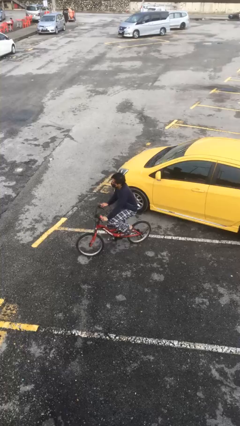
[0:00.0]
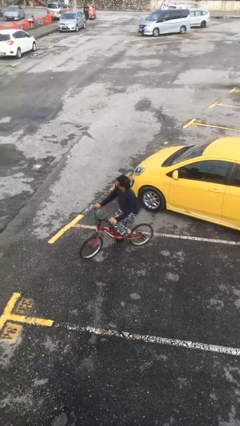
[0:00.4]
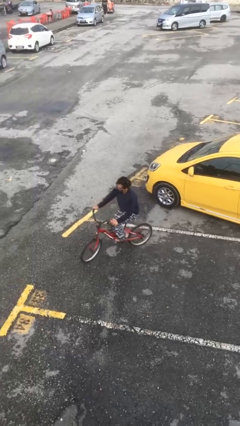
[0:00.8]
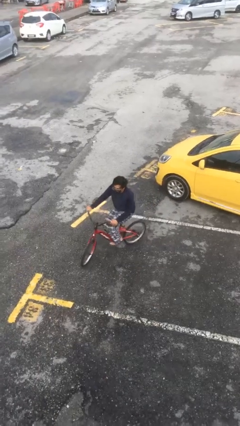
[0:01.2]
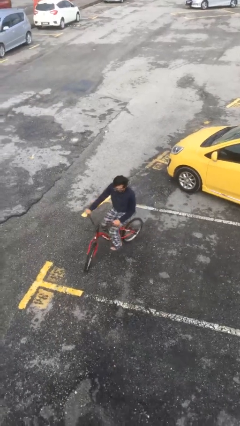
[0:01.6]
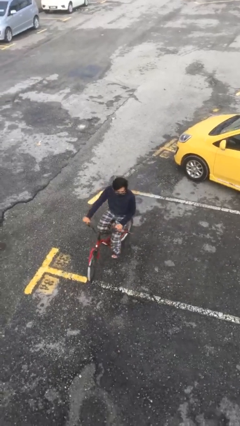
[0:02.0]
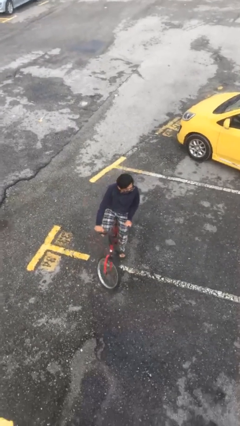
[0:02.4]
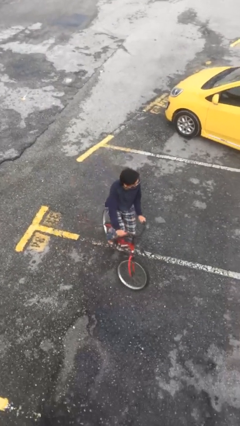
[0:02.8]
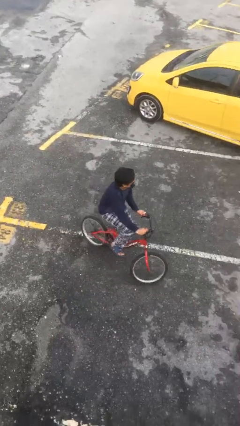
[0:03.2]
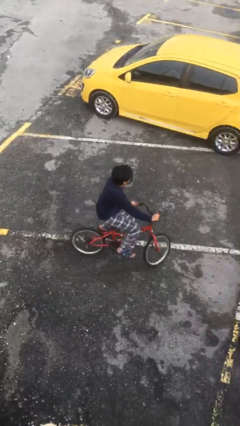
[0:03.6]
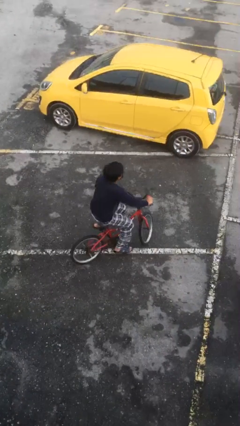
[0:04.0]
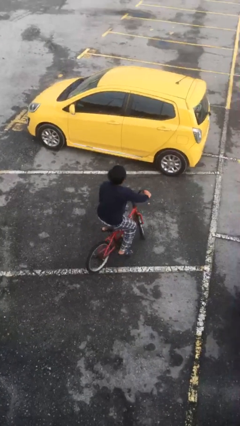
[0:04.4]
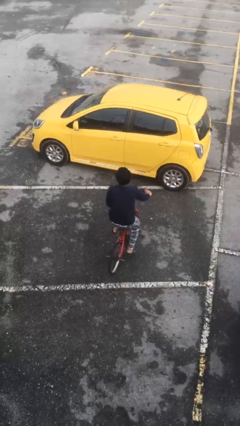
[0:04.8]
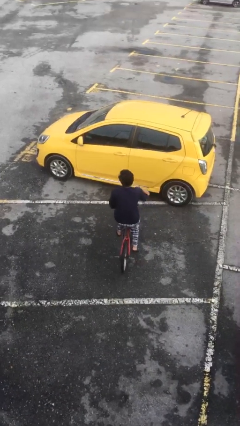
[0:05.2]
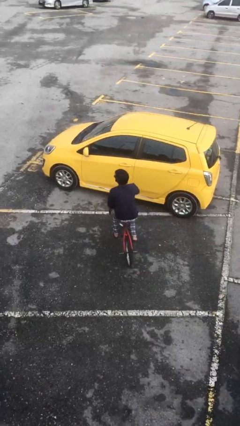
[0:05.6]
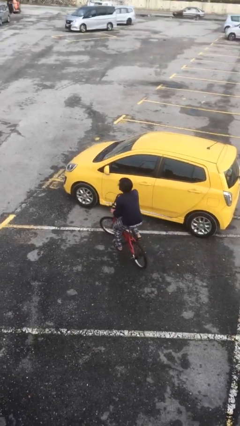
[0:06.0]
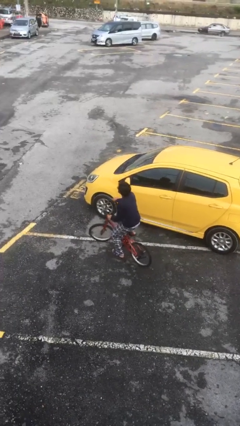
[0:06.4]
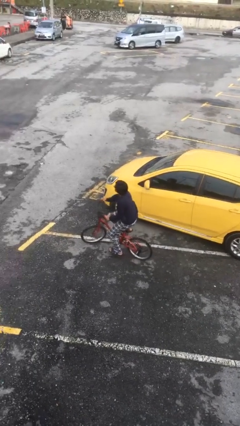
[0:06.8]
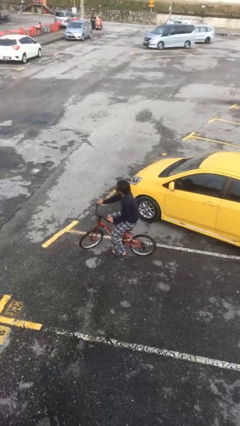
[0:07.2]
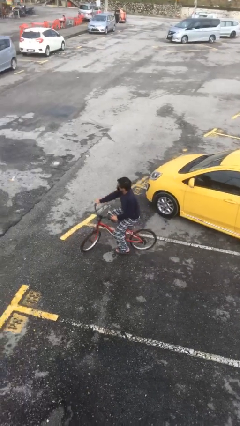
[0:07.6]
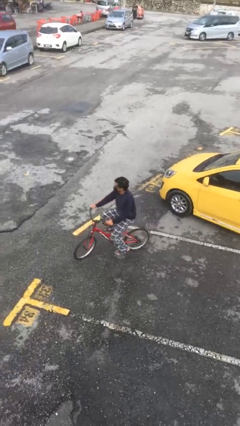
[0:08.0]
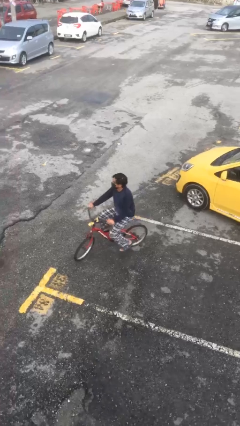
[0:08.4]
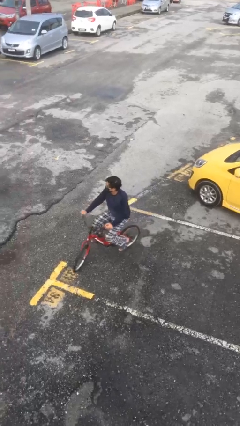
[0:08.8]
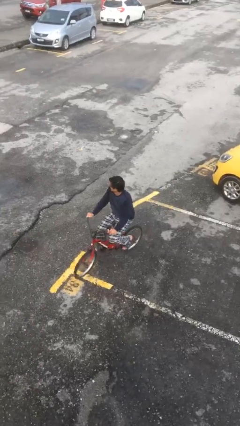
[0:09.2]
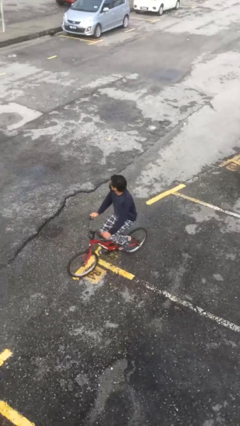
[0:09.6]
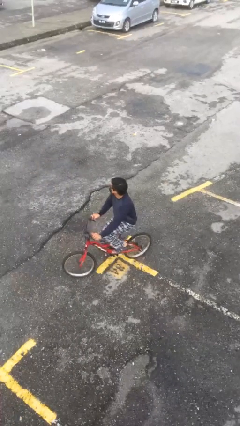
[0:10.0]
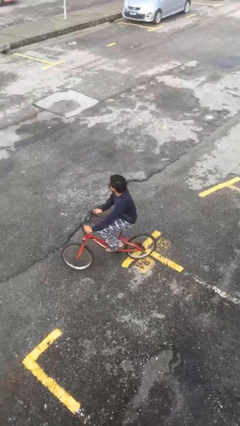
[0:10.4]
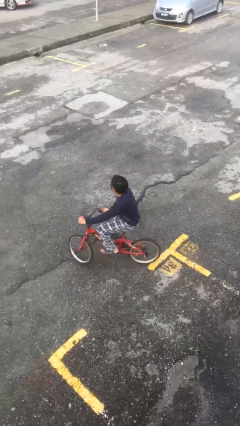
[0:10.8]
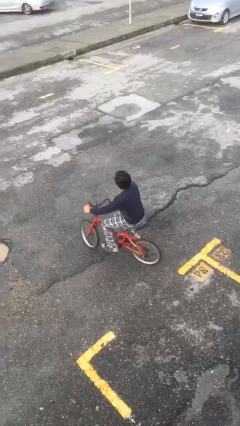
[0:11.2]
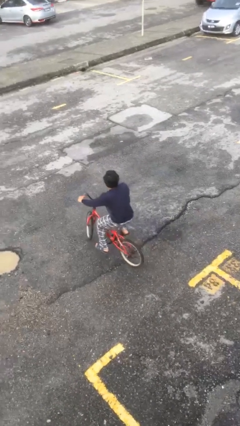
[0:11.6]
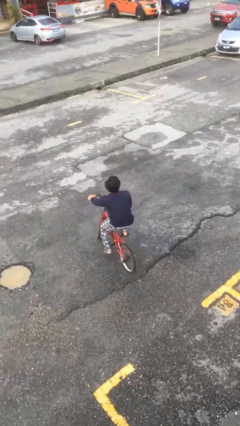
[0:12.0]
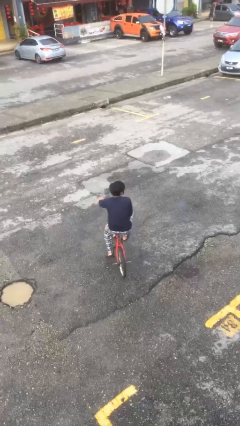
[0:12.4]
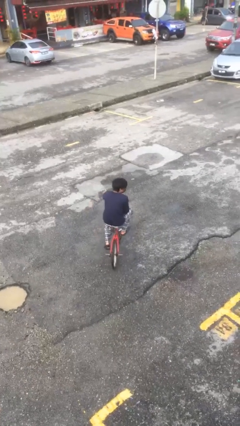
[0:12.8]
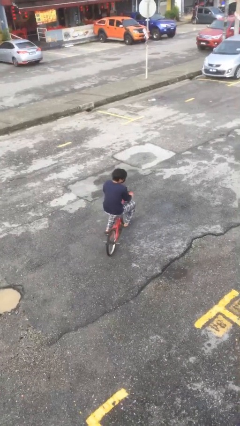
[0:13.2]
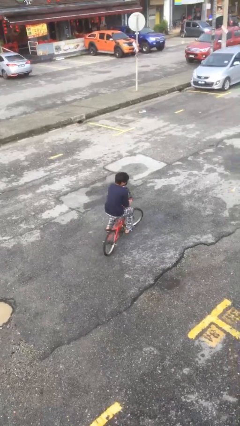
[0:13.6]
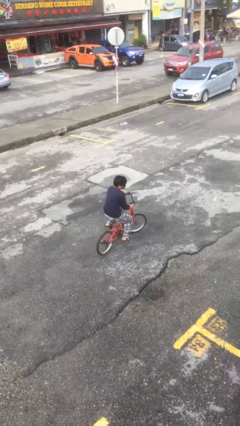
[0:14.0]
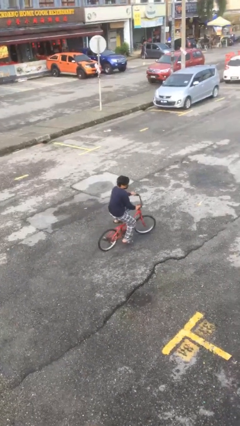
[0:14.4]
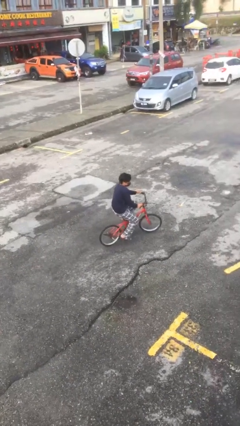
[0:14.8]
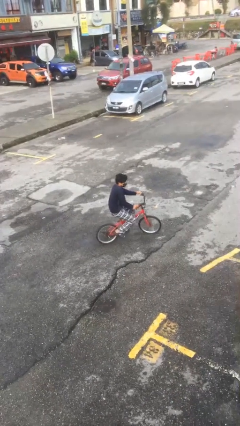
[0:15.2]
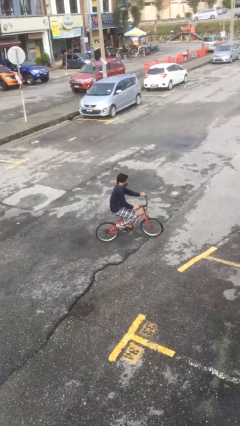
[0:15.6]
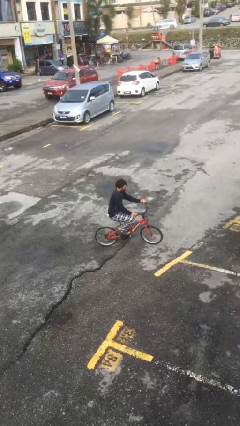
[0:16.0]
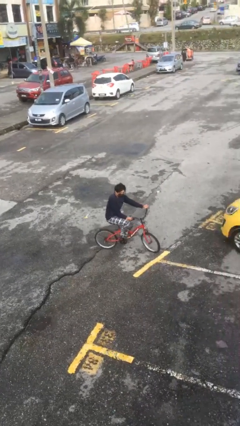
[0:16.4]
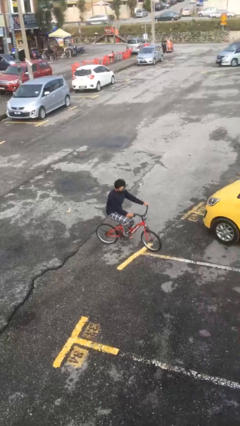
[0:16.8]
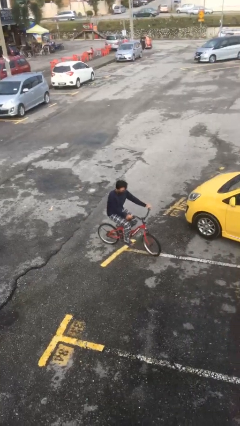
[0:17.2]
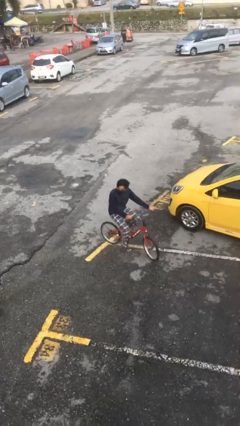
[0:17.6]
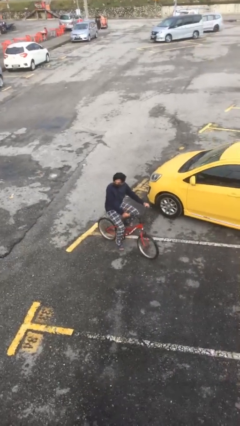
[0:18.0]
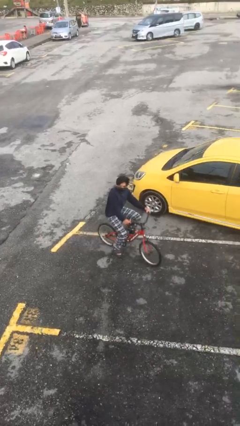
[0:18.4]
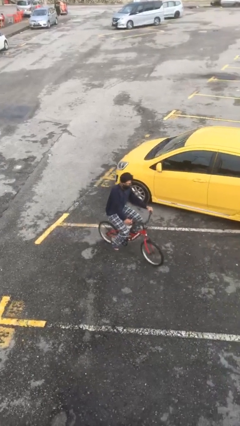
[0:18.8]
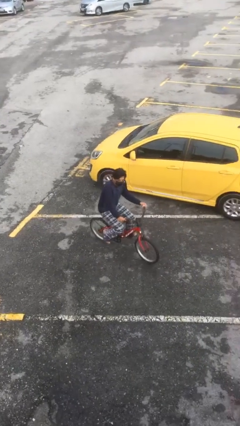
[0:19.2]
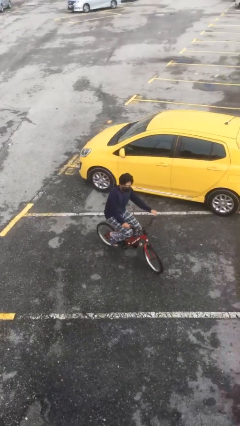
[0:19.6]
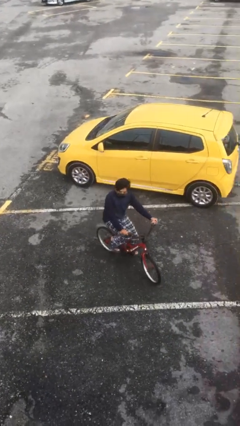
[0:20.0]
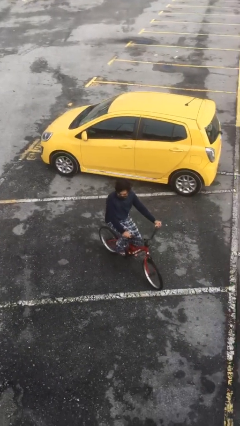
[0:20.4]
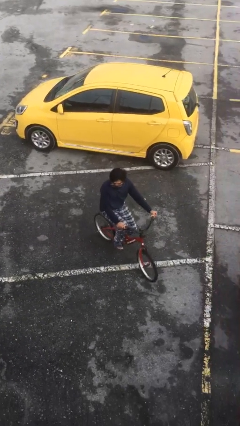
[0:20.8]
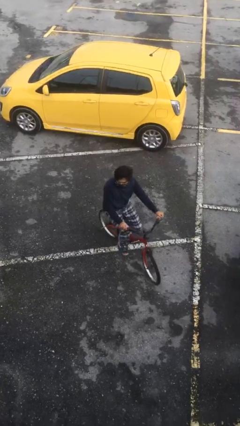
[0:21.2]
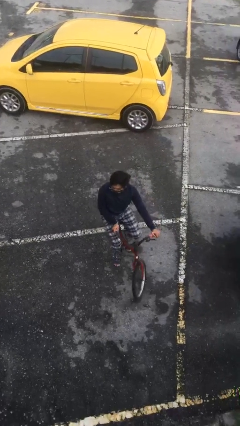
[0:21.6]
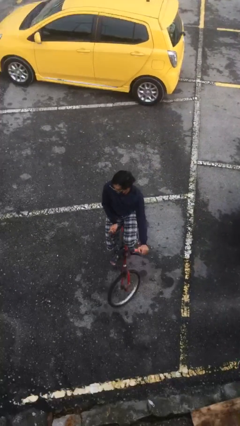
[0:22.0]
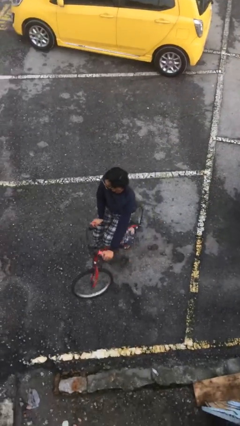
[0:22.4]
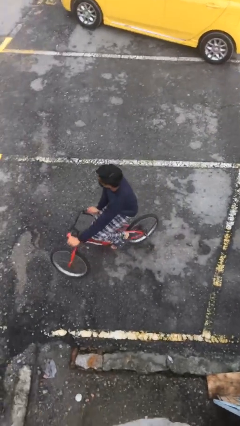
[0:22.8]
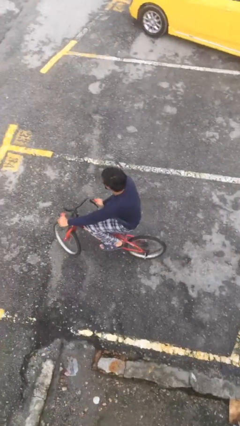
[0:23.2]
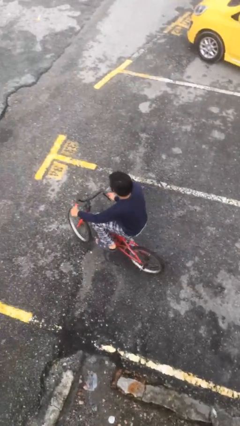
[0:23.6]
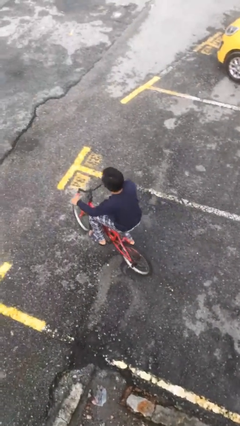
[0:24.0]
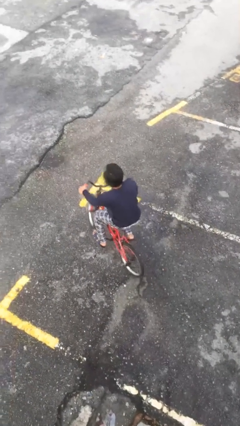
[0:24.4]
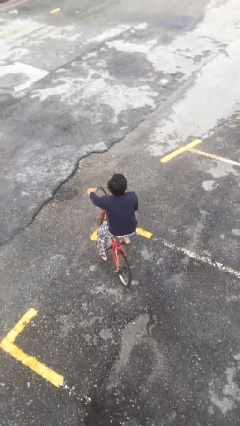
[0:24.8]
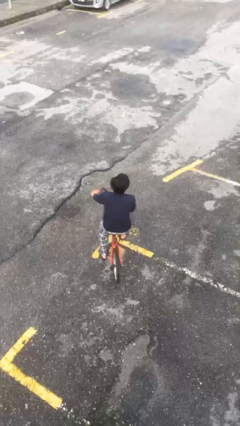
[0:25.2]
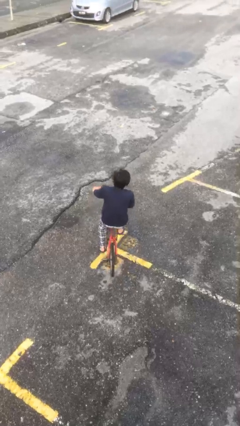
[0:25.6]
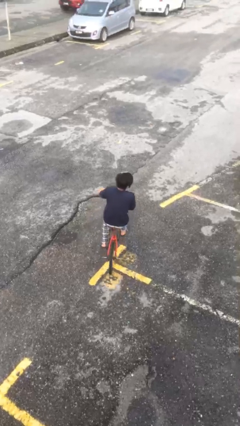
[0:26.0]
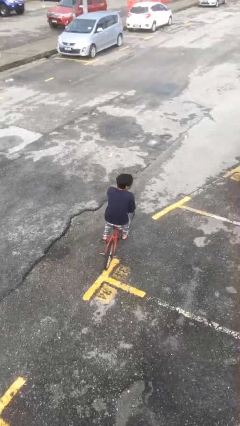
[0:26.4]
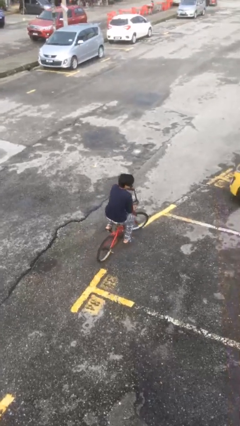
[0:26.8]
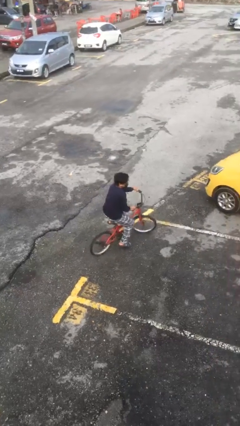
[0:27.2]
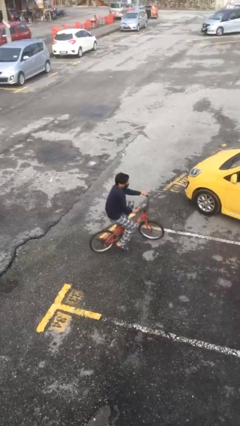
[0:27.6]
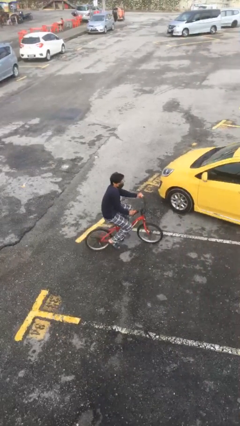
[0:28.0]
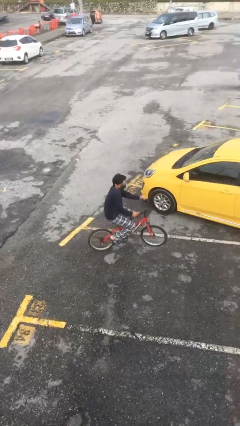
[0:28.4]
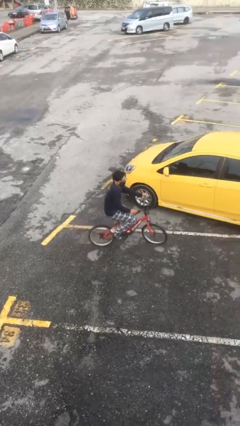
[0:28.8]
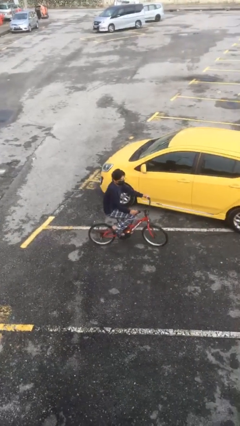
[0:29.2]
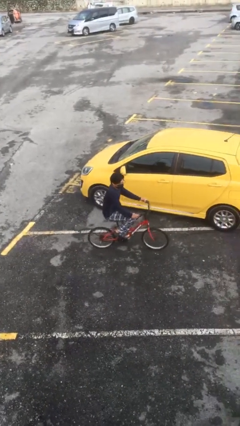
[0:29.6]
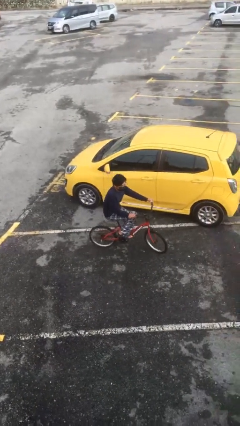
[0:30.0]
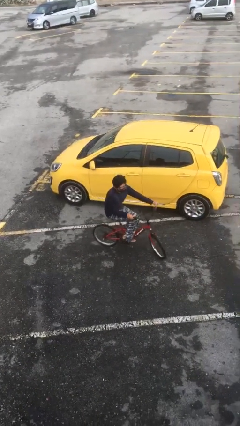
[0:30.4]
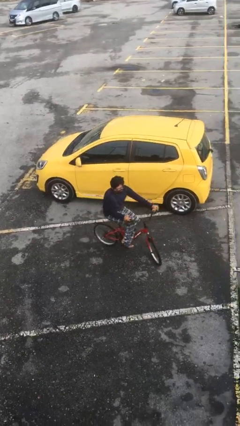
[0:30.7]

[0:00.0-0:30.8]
person rides bicycle

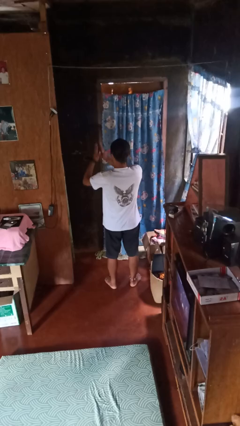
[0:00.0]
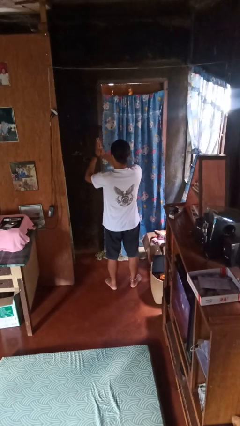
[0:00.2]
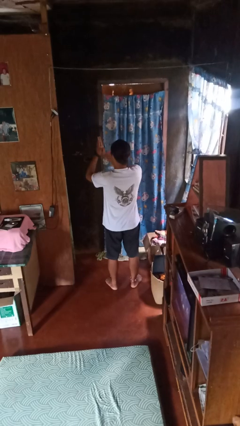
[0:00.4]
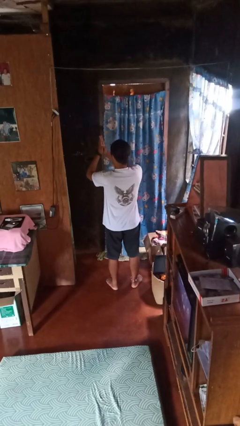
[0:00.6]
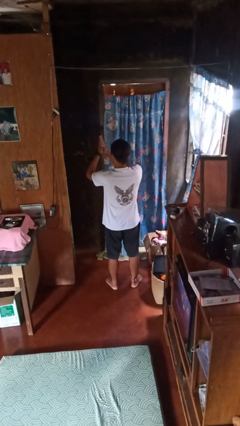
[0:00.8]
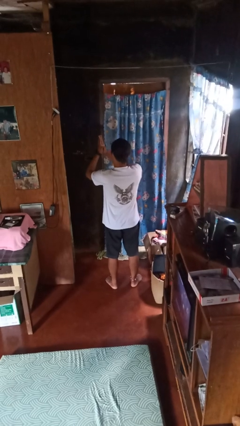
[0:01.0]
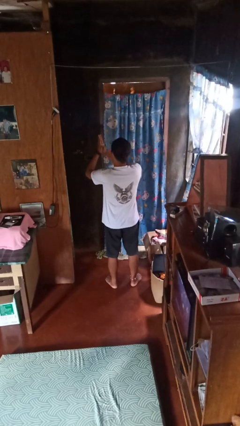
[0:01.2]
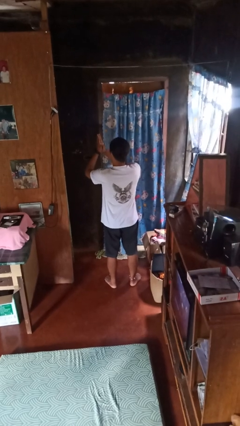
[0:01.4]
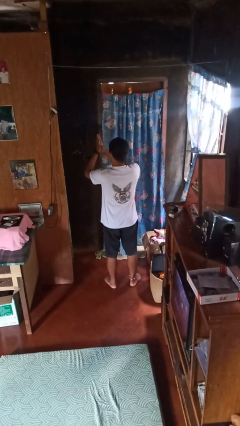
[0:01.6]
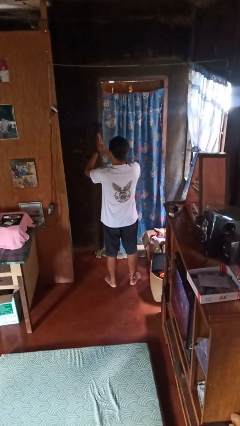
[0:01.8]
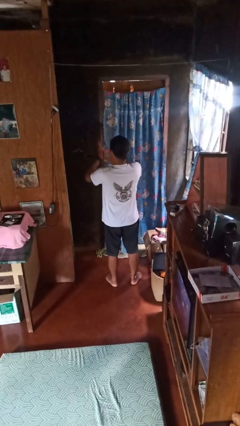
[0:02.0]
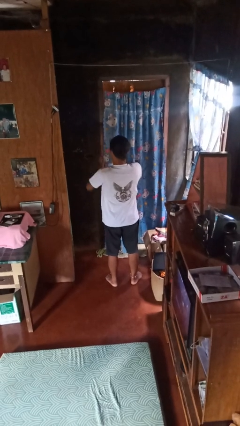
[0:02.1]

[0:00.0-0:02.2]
person prays

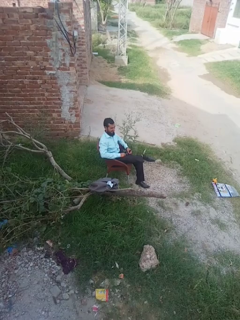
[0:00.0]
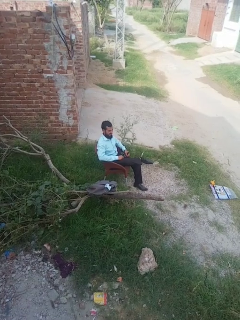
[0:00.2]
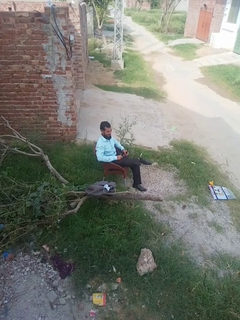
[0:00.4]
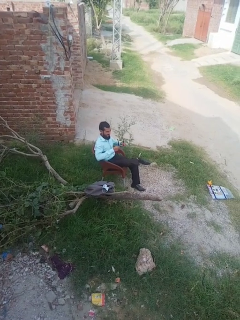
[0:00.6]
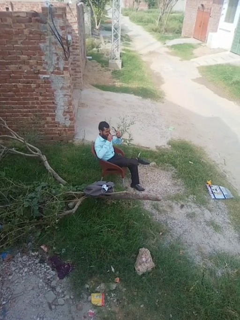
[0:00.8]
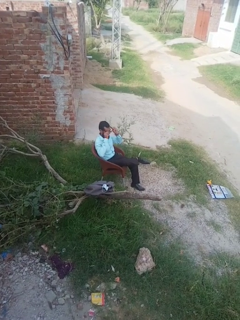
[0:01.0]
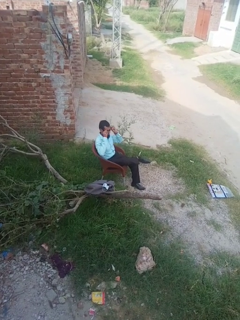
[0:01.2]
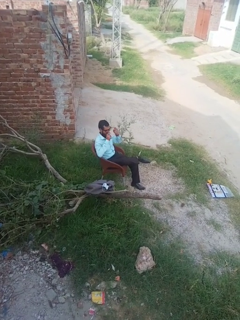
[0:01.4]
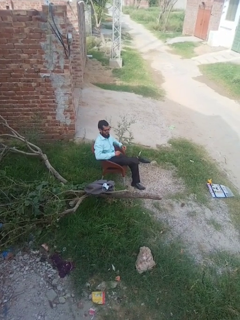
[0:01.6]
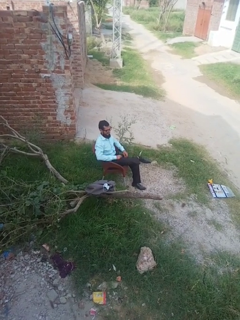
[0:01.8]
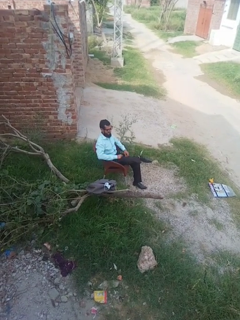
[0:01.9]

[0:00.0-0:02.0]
person puts on glasses
